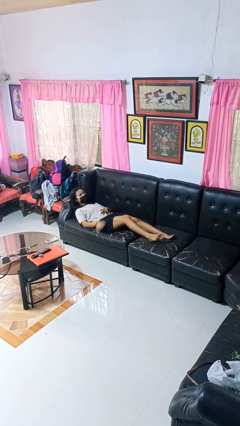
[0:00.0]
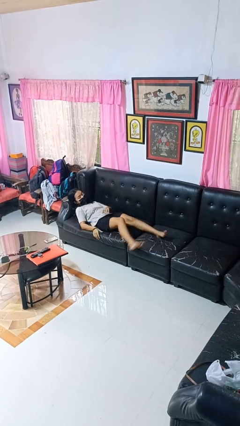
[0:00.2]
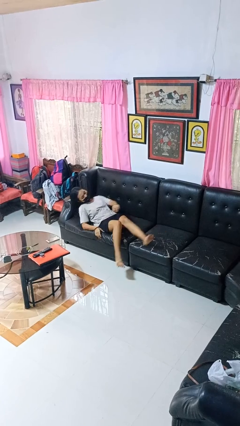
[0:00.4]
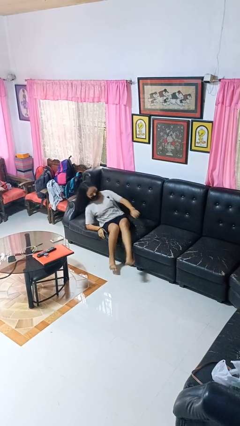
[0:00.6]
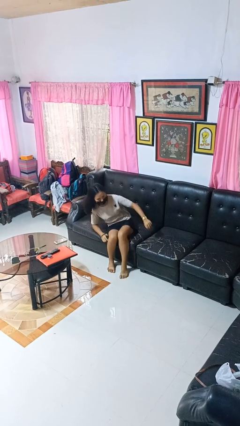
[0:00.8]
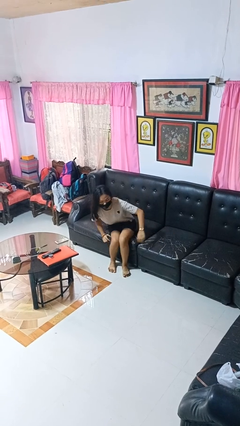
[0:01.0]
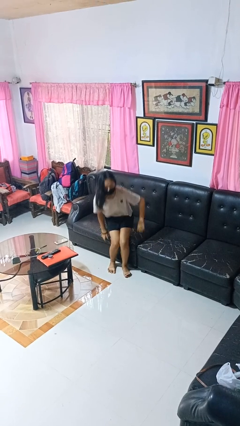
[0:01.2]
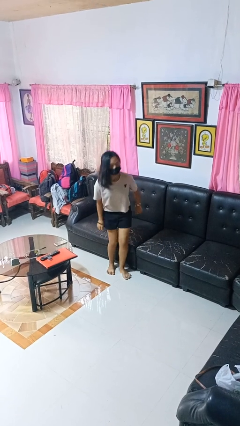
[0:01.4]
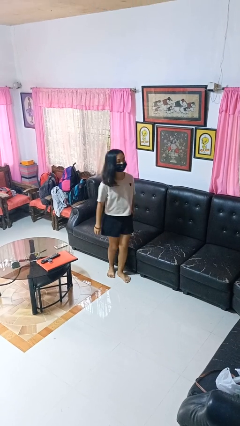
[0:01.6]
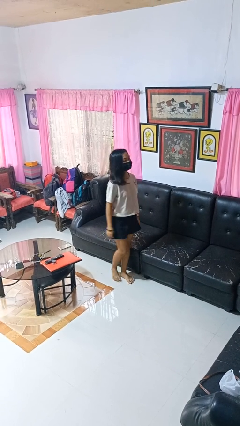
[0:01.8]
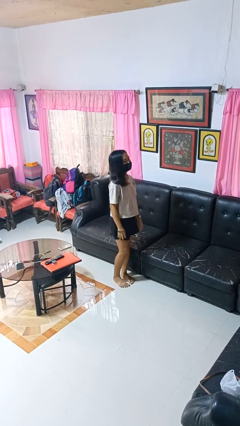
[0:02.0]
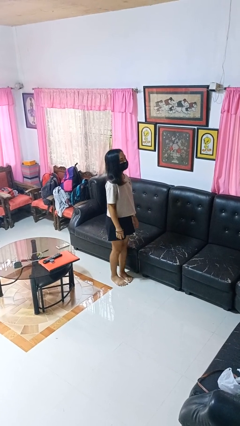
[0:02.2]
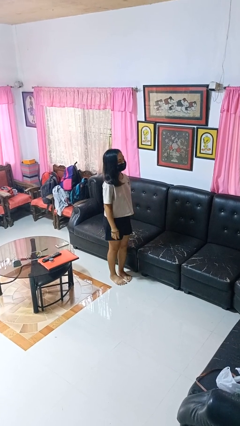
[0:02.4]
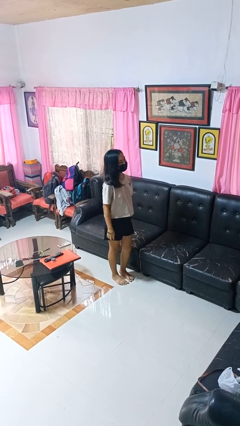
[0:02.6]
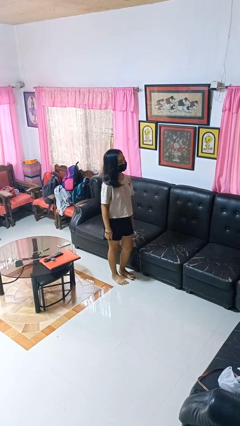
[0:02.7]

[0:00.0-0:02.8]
person stands up

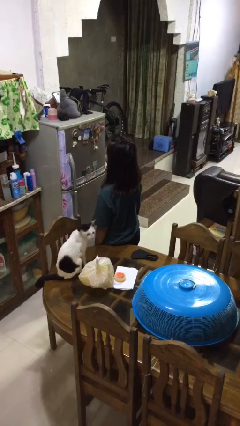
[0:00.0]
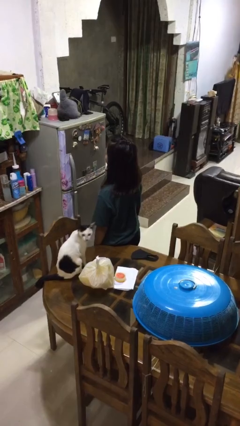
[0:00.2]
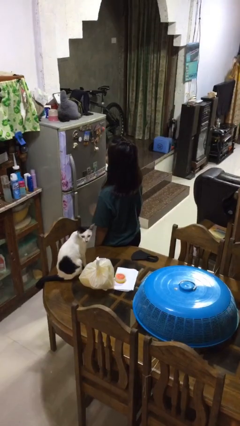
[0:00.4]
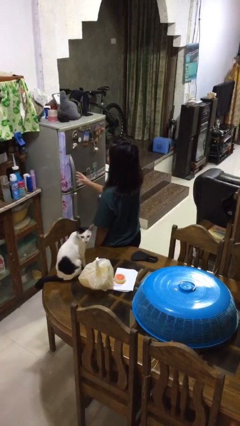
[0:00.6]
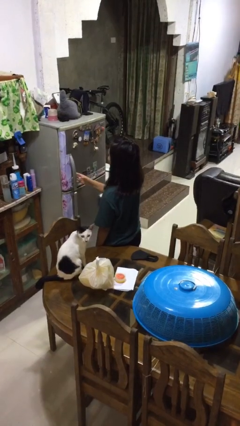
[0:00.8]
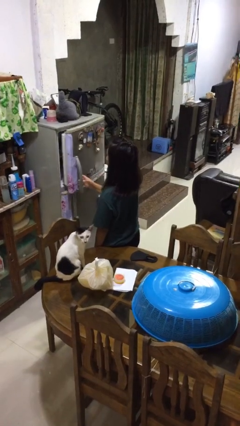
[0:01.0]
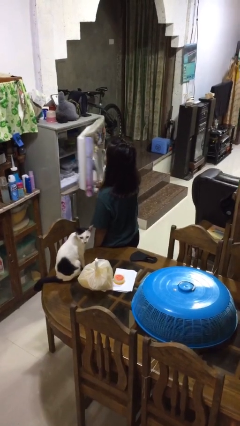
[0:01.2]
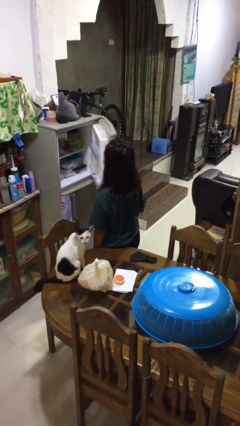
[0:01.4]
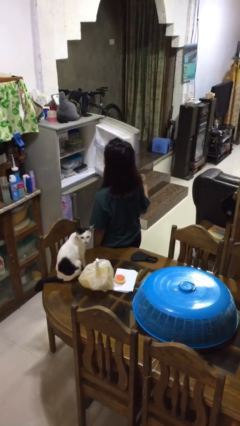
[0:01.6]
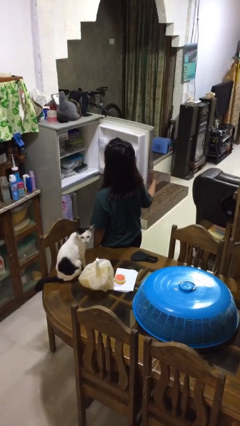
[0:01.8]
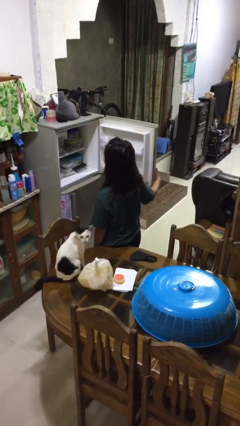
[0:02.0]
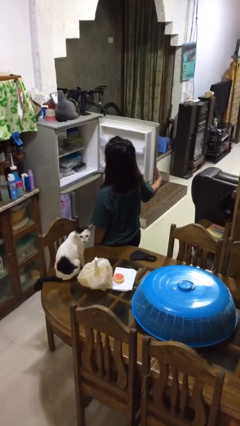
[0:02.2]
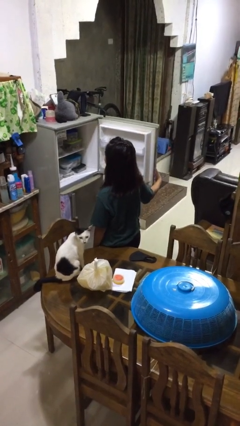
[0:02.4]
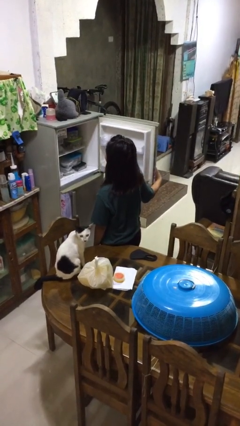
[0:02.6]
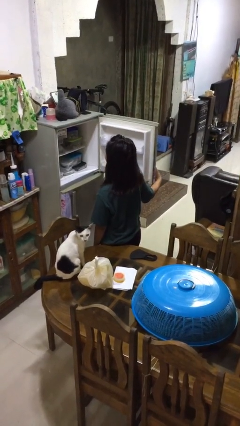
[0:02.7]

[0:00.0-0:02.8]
person opens refrigerator

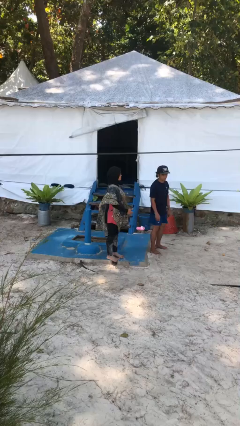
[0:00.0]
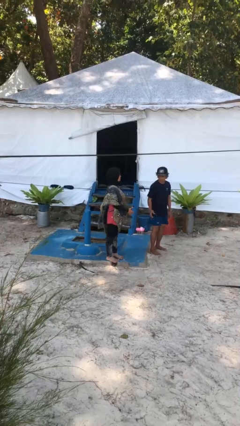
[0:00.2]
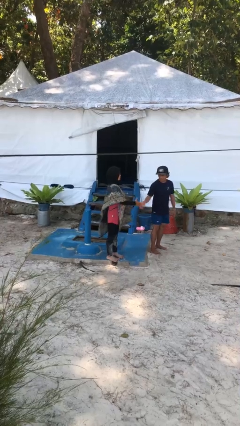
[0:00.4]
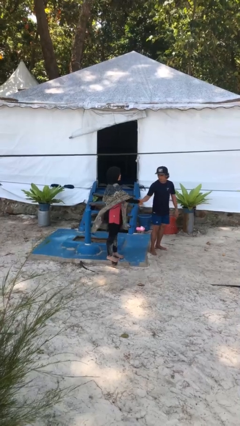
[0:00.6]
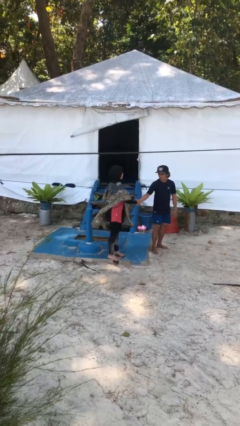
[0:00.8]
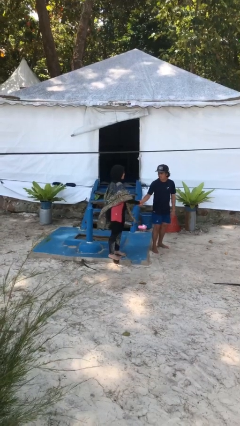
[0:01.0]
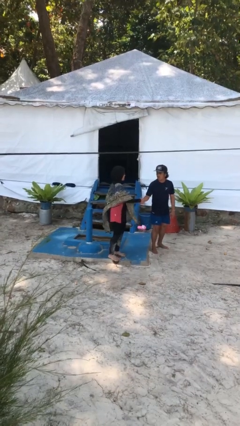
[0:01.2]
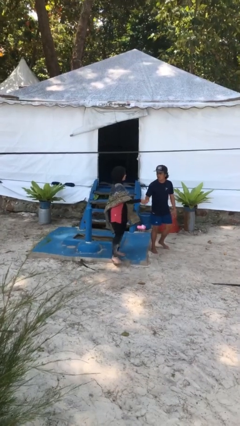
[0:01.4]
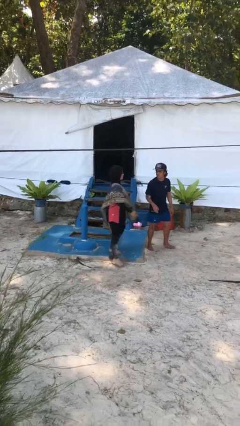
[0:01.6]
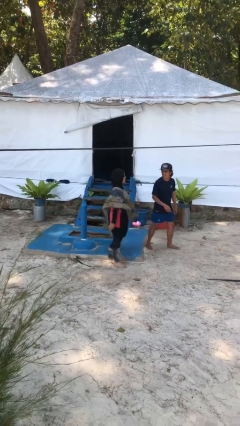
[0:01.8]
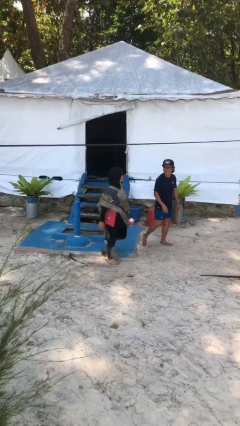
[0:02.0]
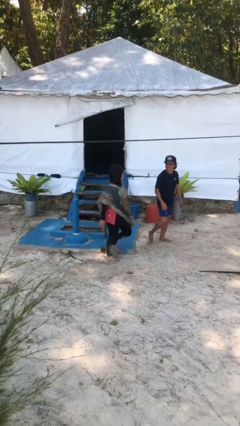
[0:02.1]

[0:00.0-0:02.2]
person shakes hand

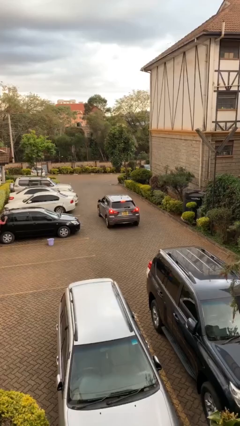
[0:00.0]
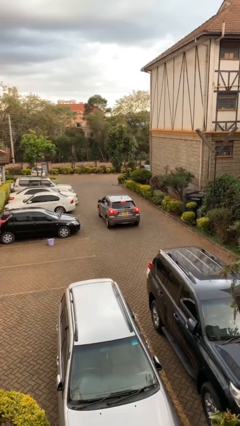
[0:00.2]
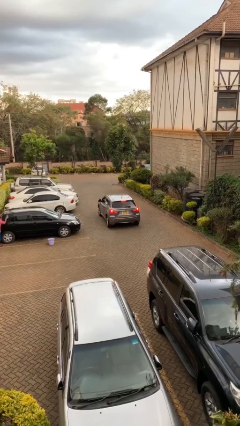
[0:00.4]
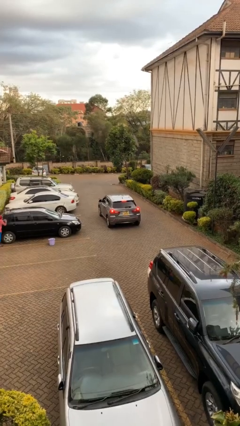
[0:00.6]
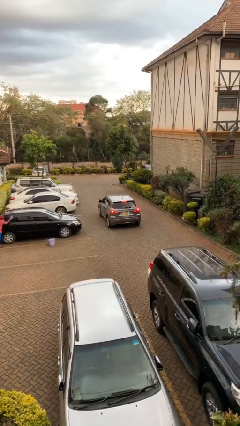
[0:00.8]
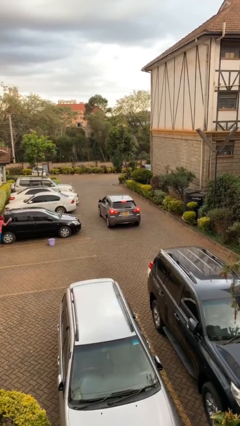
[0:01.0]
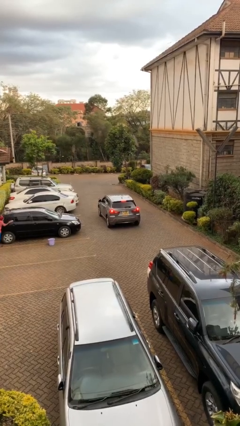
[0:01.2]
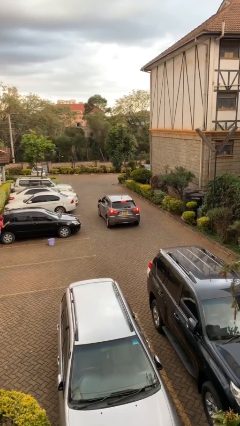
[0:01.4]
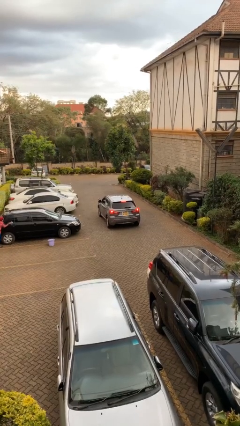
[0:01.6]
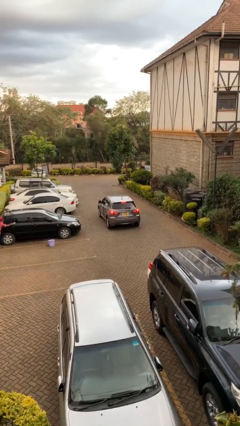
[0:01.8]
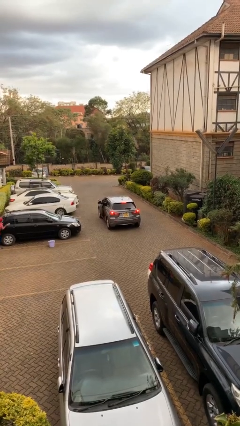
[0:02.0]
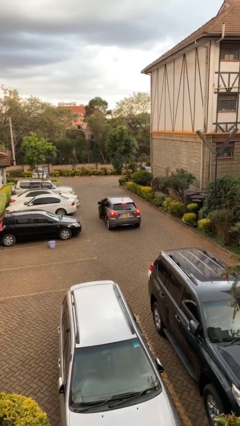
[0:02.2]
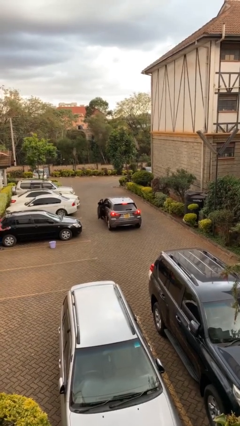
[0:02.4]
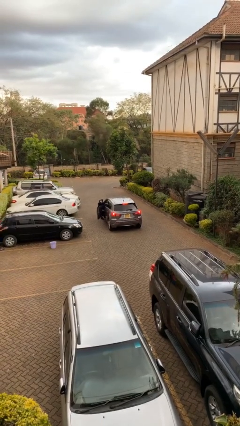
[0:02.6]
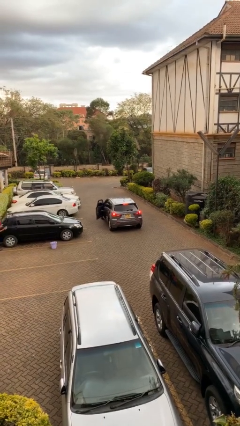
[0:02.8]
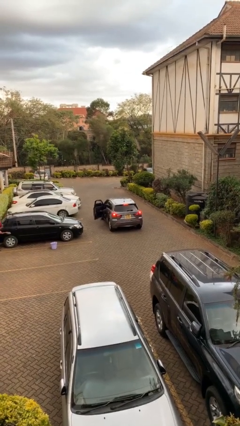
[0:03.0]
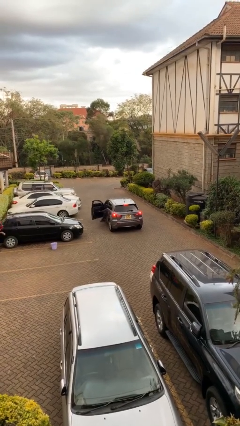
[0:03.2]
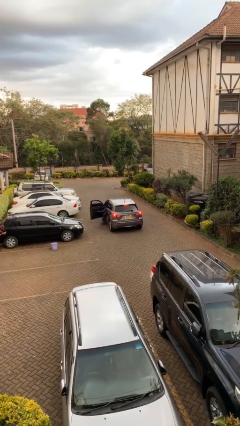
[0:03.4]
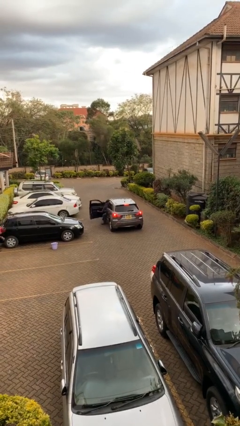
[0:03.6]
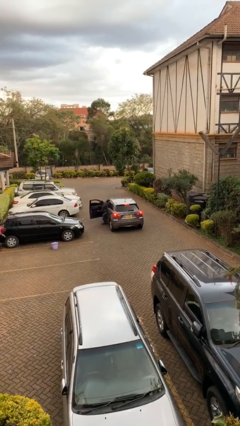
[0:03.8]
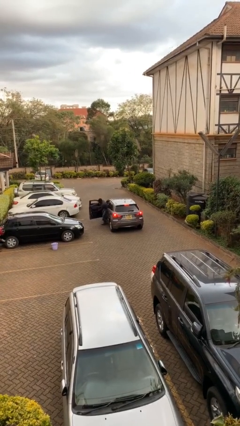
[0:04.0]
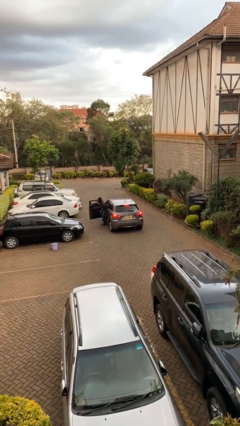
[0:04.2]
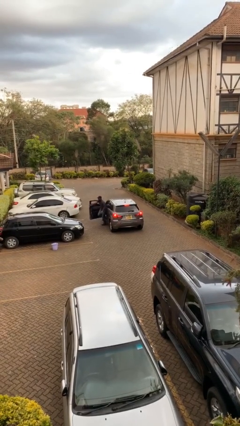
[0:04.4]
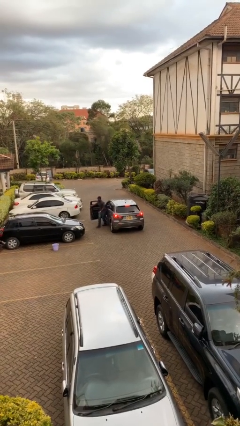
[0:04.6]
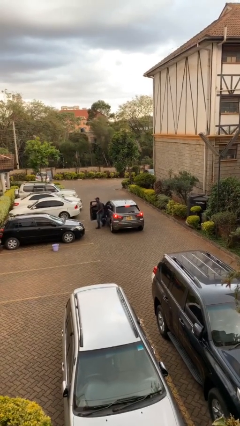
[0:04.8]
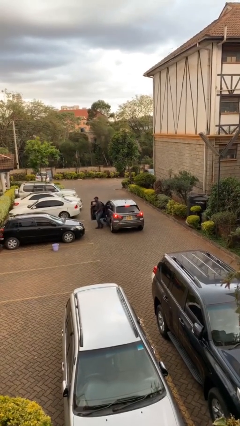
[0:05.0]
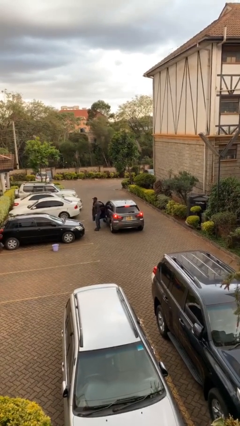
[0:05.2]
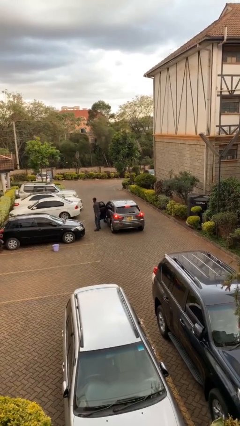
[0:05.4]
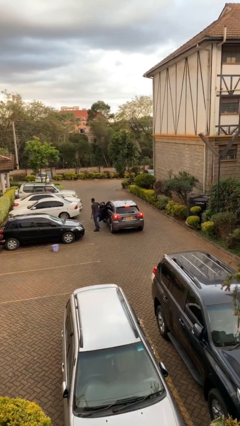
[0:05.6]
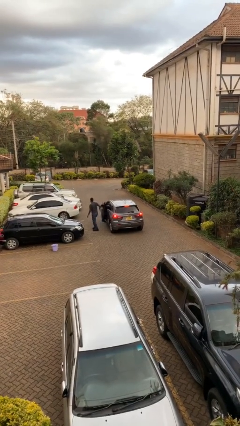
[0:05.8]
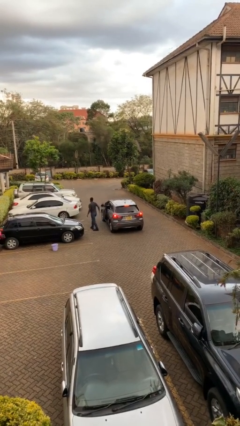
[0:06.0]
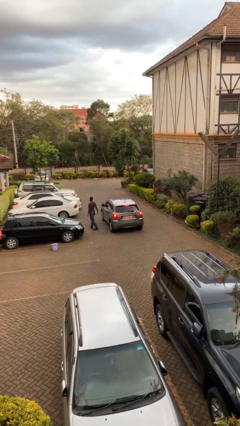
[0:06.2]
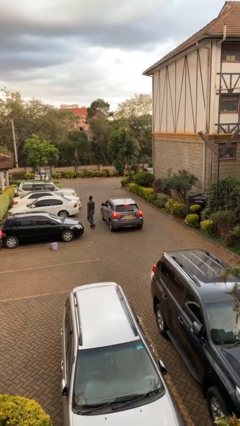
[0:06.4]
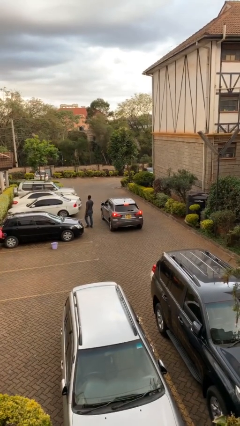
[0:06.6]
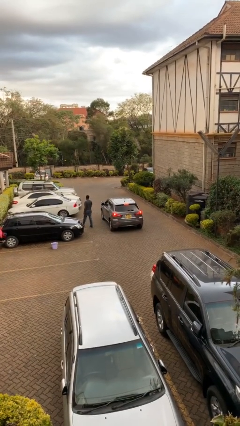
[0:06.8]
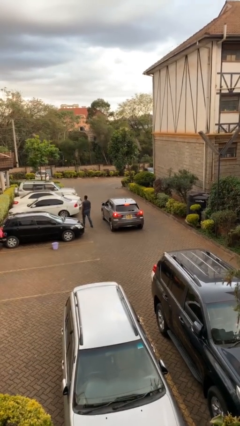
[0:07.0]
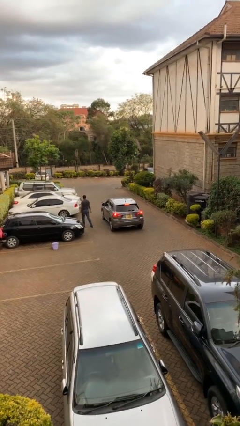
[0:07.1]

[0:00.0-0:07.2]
car drops off person

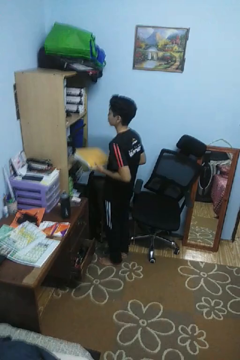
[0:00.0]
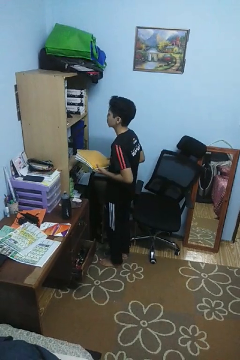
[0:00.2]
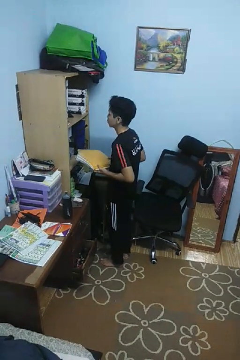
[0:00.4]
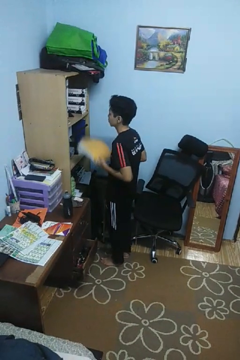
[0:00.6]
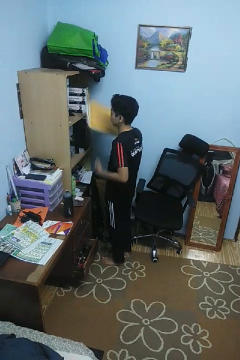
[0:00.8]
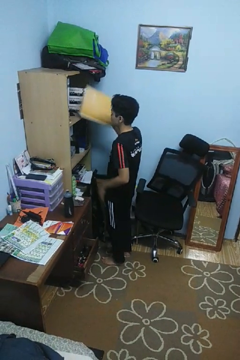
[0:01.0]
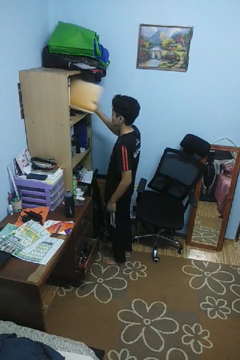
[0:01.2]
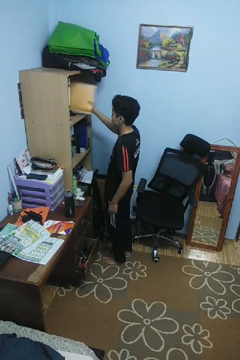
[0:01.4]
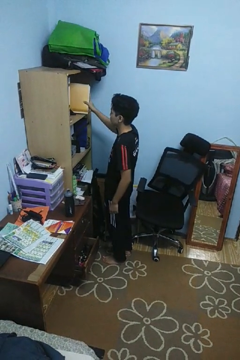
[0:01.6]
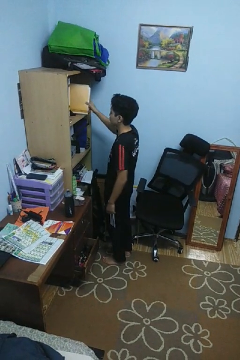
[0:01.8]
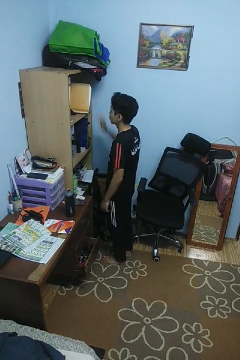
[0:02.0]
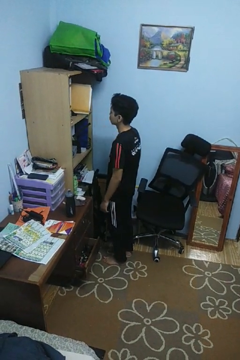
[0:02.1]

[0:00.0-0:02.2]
person puts down object into cabinet

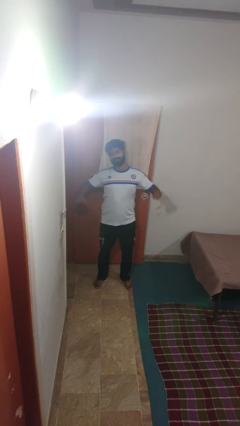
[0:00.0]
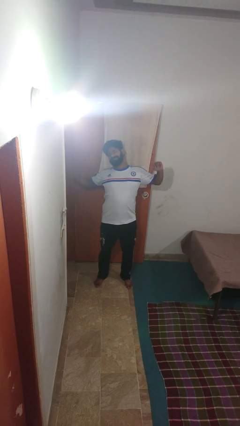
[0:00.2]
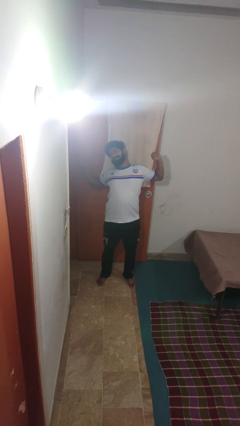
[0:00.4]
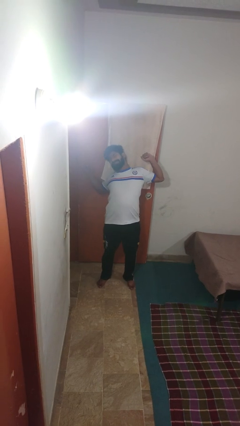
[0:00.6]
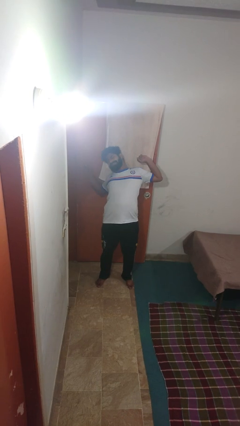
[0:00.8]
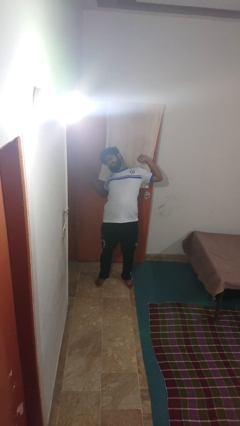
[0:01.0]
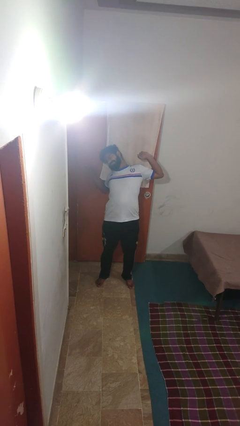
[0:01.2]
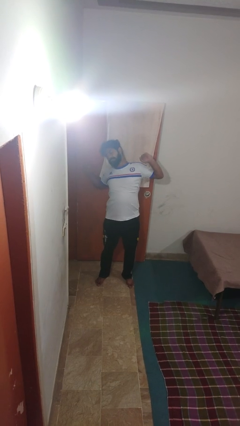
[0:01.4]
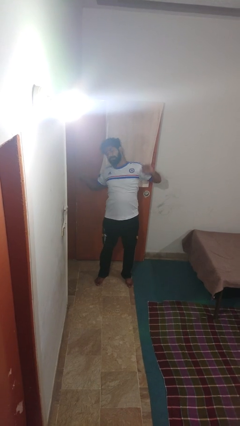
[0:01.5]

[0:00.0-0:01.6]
person stretches arms to side
